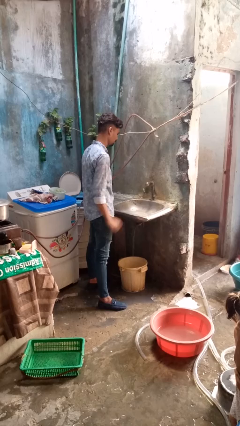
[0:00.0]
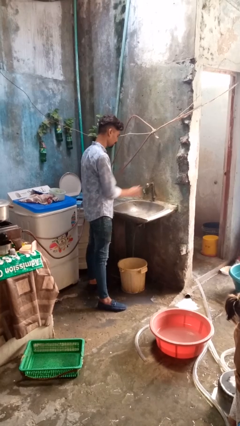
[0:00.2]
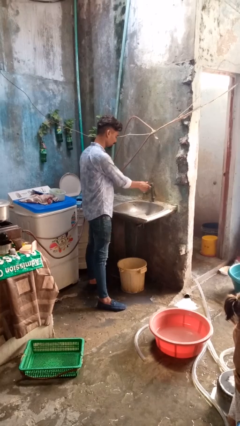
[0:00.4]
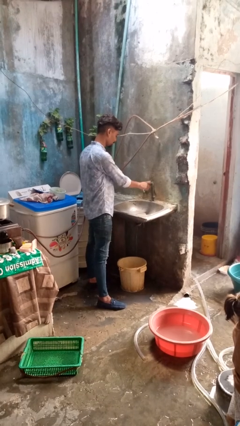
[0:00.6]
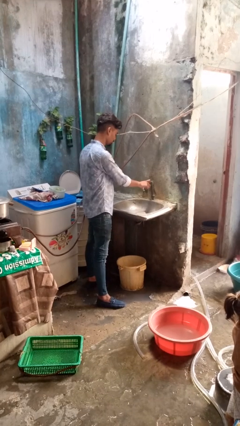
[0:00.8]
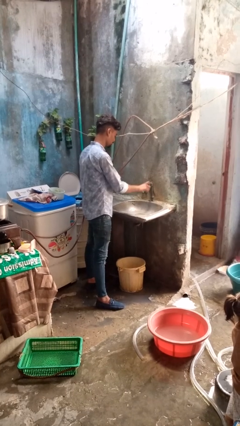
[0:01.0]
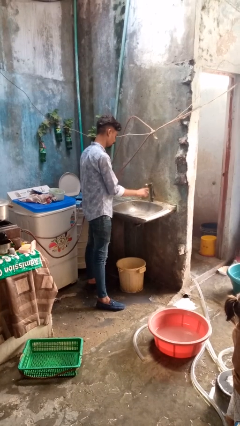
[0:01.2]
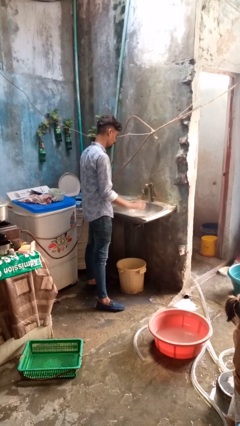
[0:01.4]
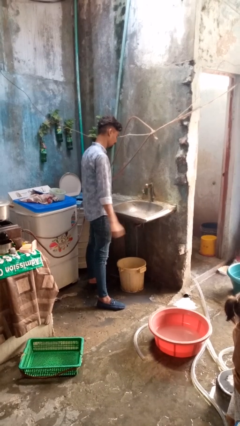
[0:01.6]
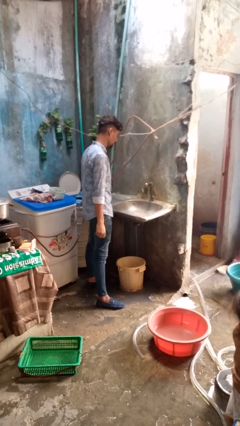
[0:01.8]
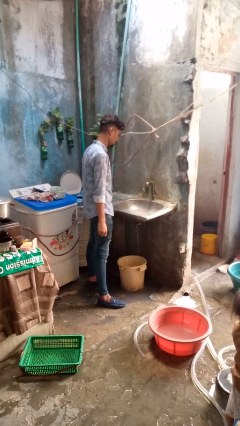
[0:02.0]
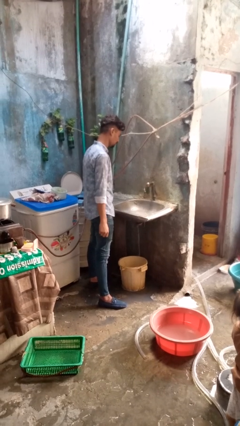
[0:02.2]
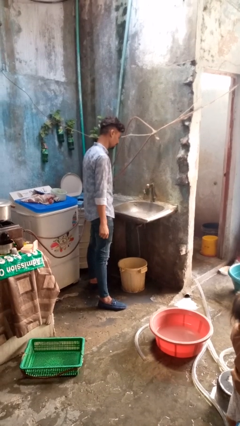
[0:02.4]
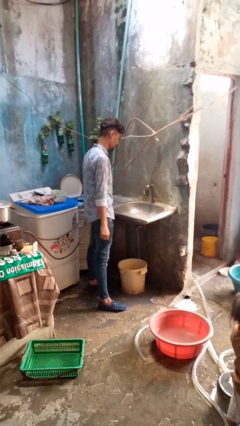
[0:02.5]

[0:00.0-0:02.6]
person turns on faucet

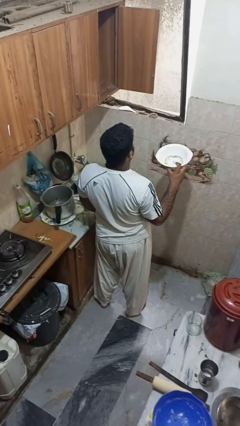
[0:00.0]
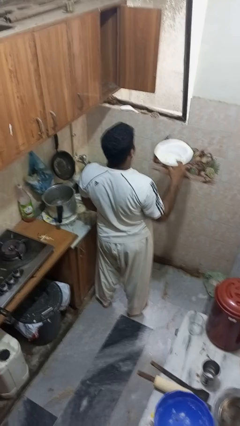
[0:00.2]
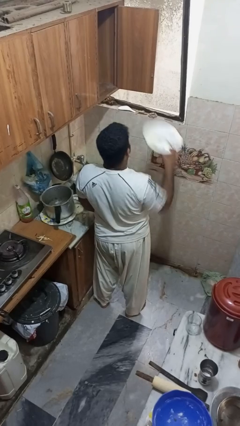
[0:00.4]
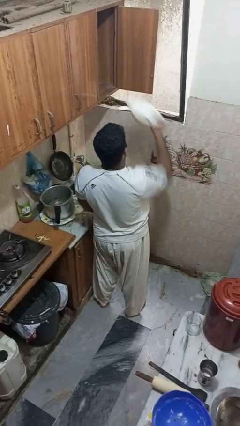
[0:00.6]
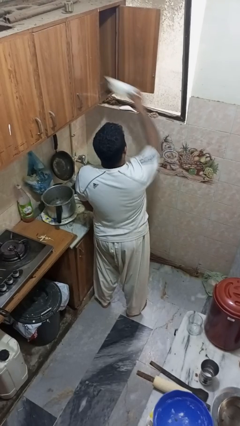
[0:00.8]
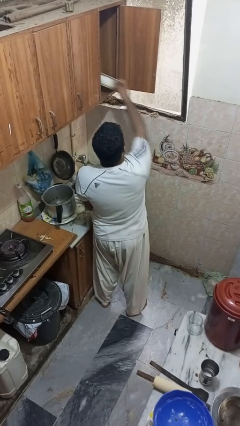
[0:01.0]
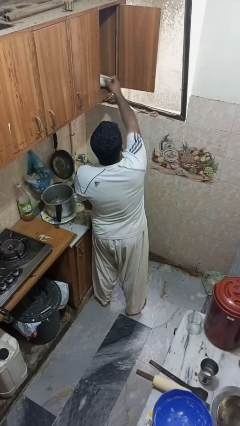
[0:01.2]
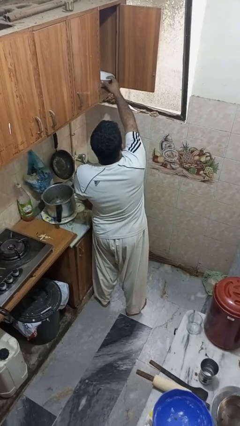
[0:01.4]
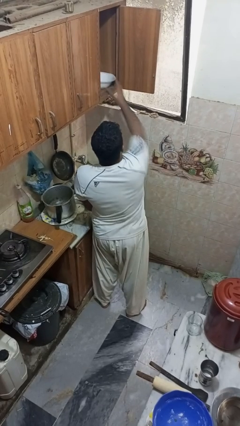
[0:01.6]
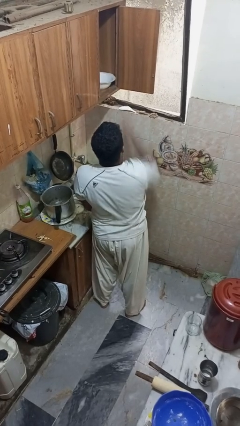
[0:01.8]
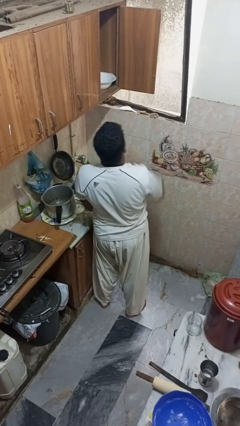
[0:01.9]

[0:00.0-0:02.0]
person puts object in cabinet

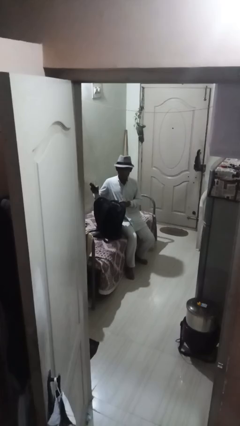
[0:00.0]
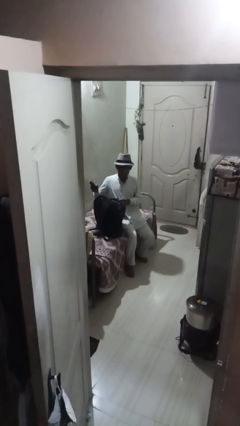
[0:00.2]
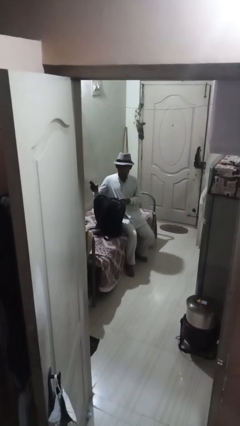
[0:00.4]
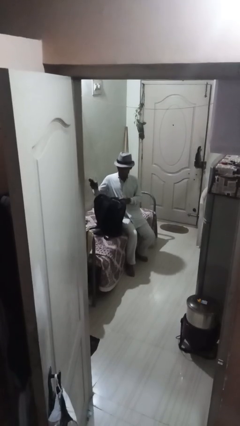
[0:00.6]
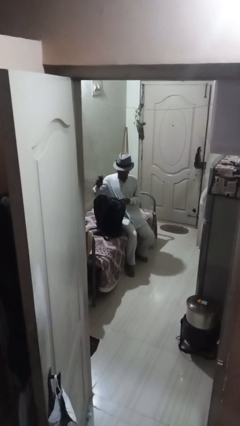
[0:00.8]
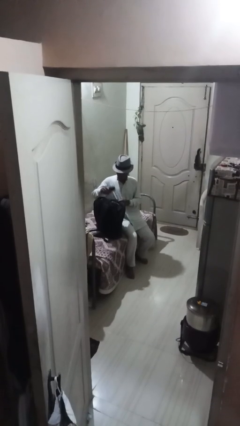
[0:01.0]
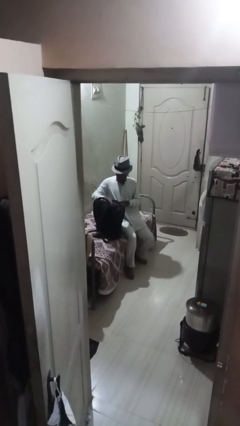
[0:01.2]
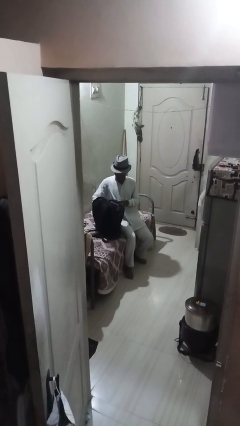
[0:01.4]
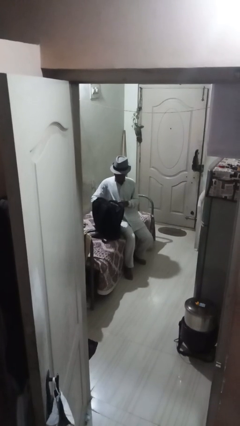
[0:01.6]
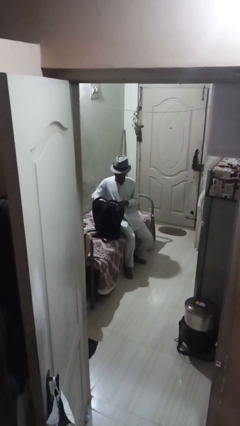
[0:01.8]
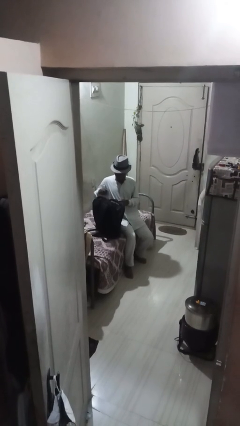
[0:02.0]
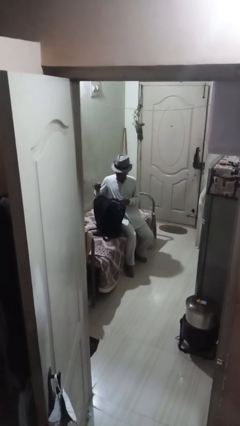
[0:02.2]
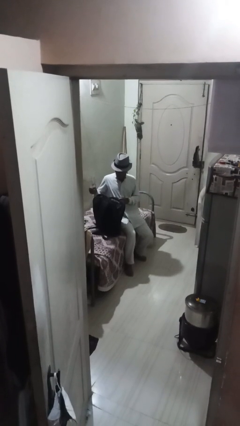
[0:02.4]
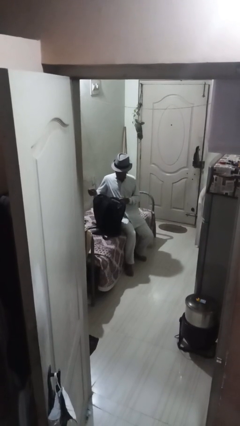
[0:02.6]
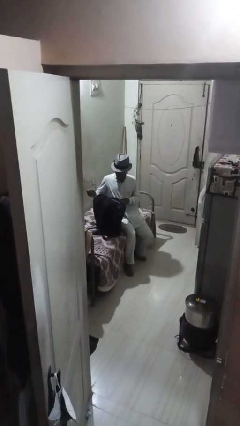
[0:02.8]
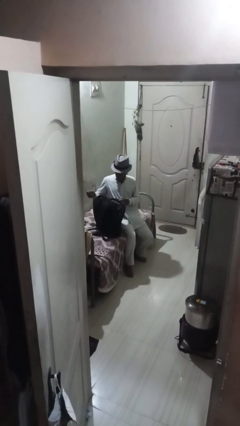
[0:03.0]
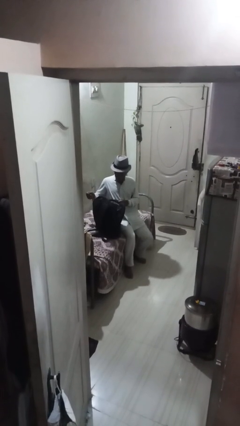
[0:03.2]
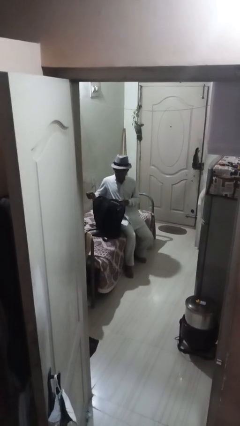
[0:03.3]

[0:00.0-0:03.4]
person puts object into backpack

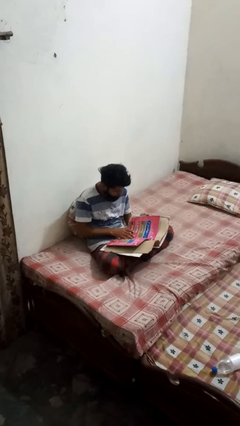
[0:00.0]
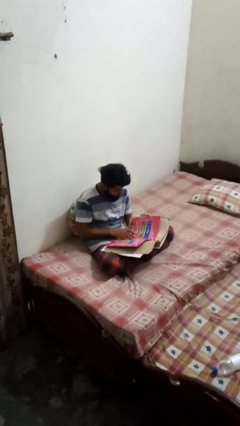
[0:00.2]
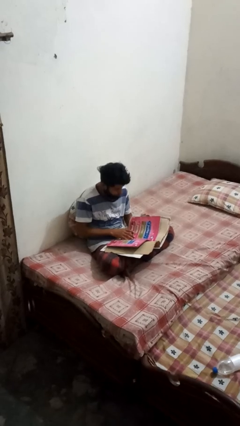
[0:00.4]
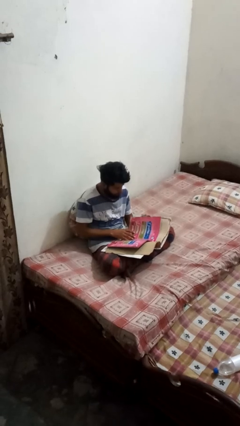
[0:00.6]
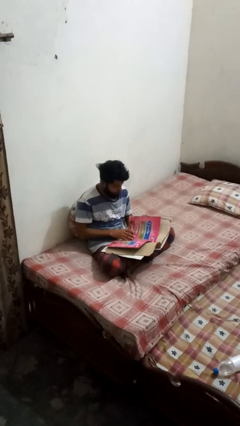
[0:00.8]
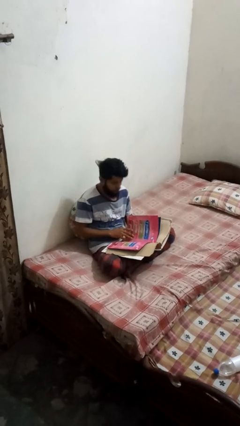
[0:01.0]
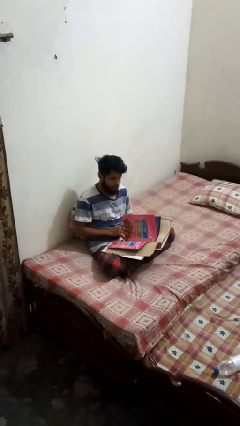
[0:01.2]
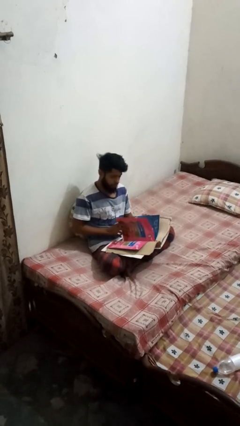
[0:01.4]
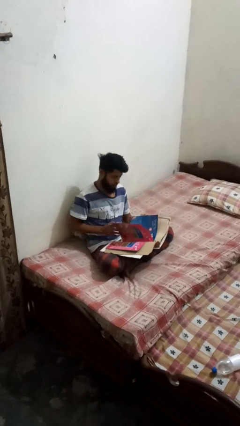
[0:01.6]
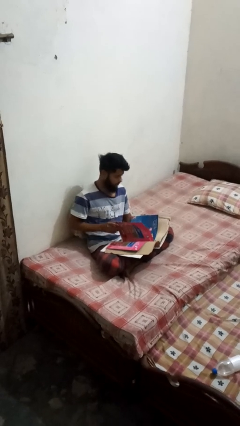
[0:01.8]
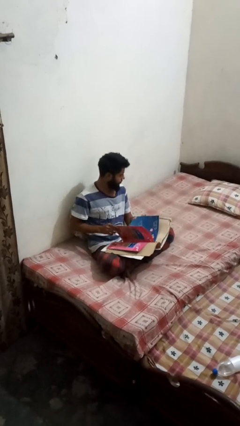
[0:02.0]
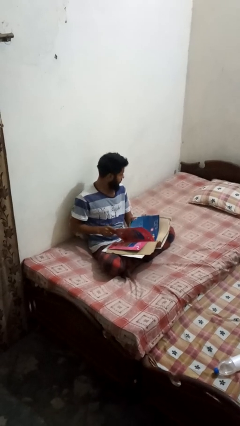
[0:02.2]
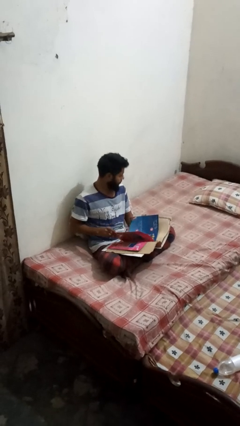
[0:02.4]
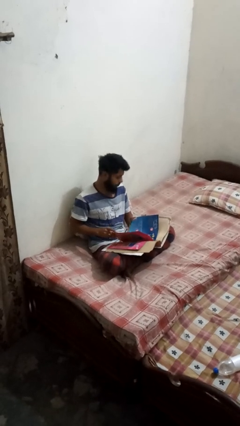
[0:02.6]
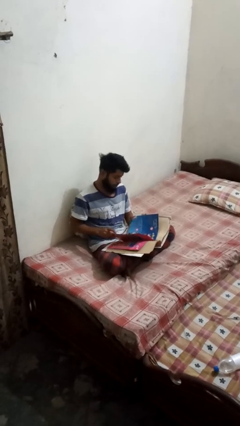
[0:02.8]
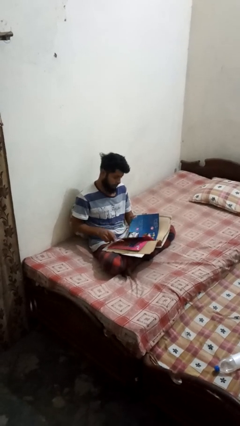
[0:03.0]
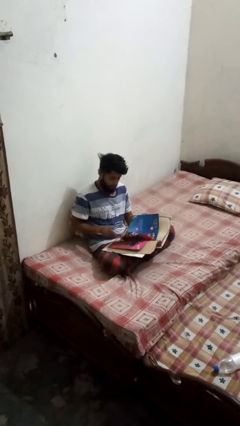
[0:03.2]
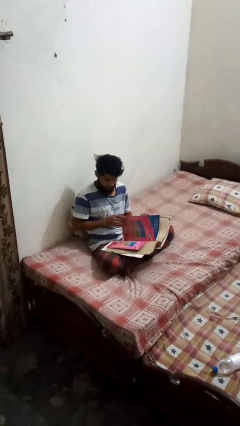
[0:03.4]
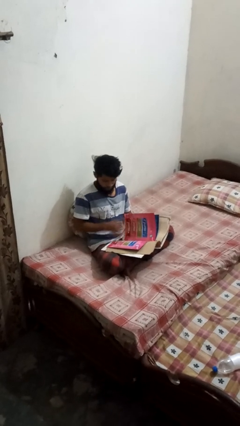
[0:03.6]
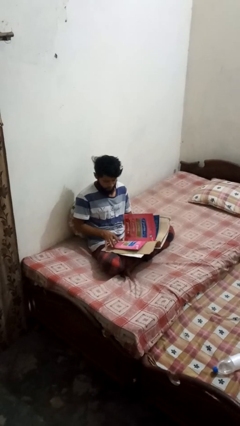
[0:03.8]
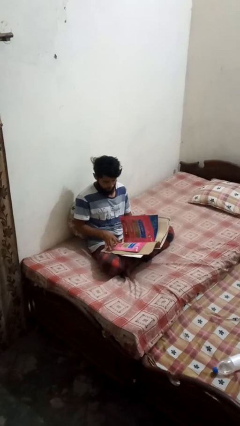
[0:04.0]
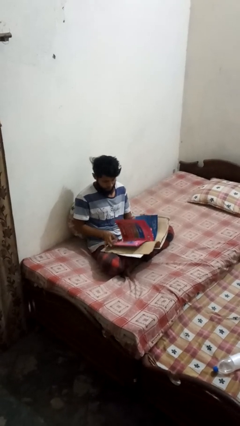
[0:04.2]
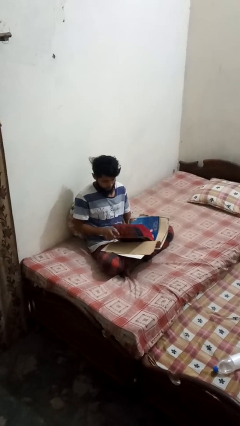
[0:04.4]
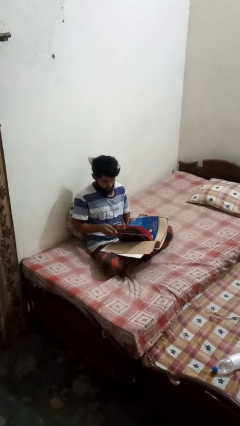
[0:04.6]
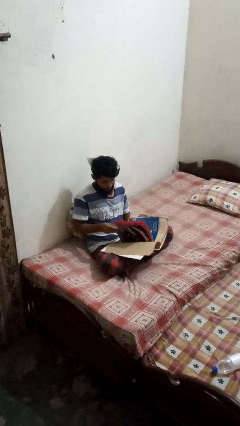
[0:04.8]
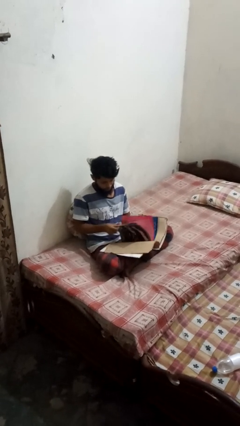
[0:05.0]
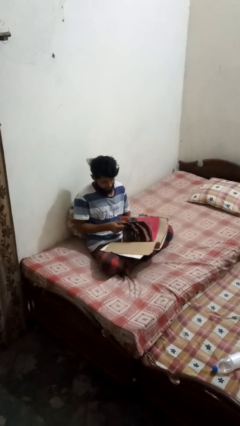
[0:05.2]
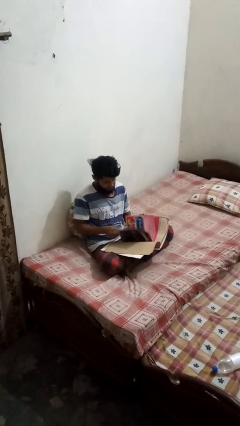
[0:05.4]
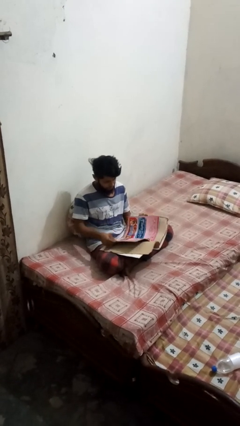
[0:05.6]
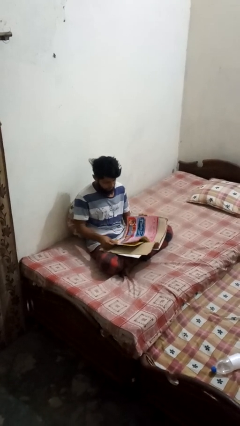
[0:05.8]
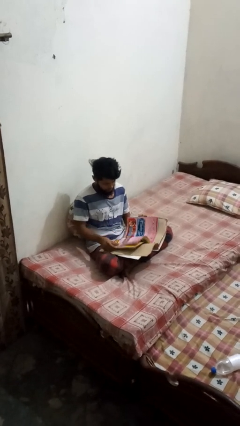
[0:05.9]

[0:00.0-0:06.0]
person reads magazine

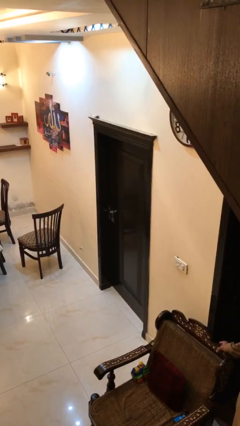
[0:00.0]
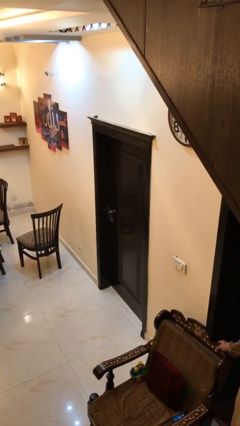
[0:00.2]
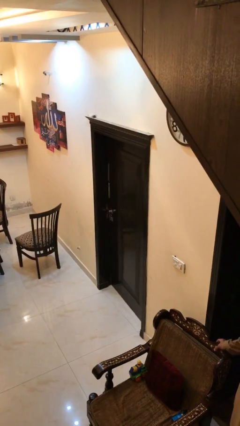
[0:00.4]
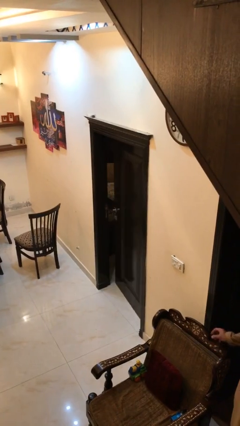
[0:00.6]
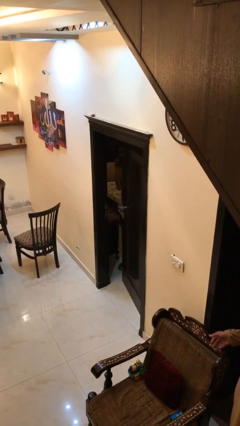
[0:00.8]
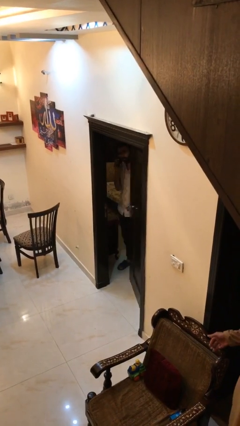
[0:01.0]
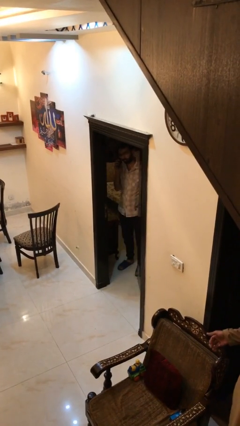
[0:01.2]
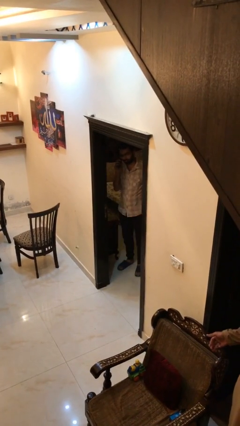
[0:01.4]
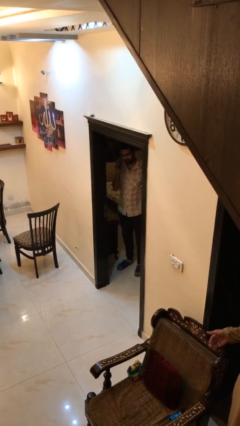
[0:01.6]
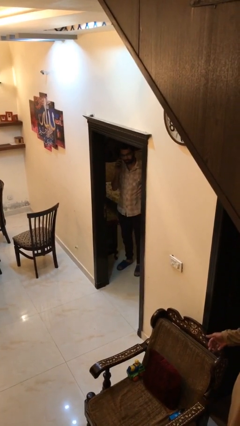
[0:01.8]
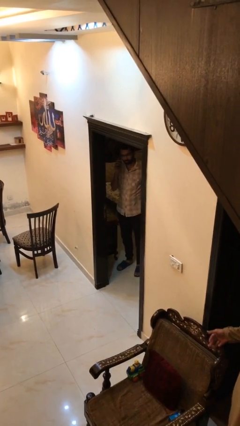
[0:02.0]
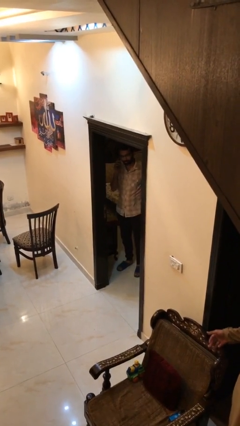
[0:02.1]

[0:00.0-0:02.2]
person opens facility door

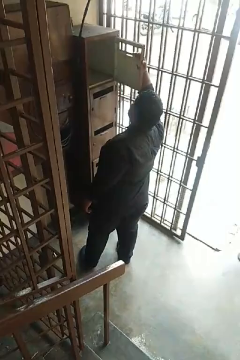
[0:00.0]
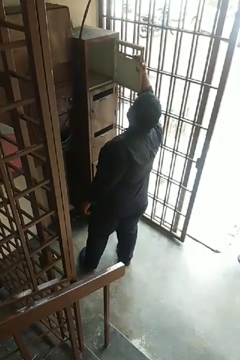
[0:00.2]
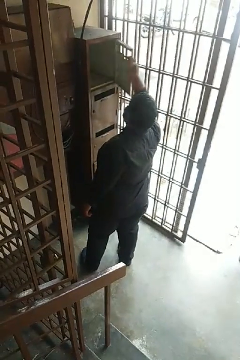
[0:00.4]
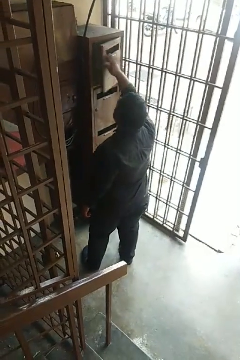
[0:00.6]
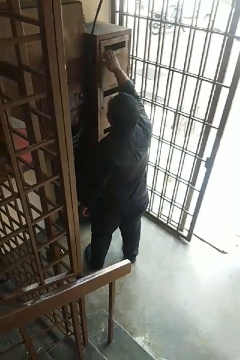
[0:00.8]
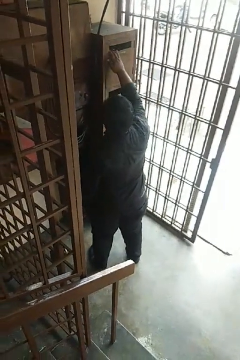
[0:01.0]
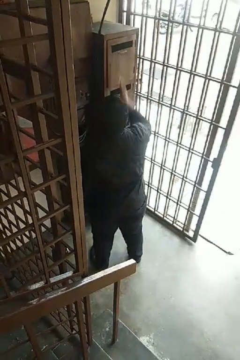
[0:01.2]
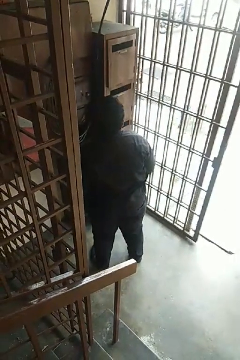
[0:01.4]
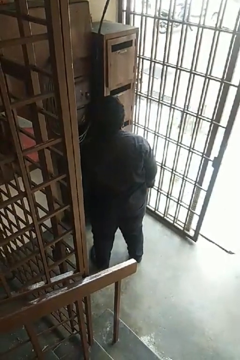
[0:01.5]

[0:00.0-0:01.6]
person closes mailbox
